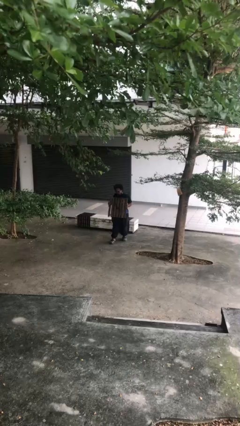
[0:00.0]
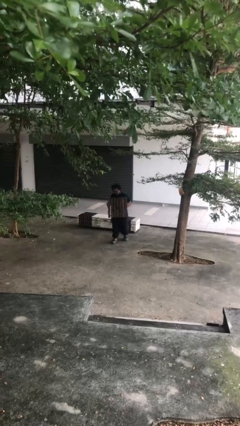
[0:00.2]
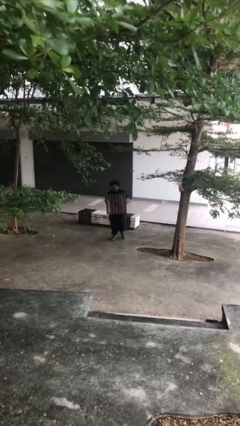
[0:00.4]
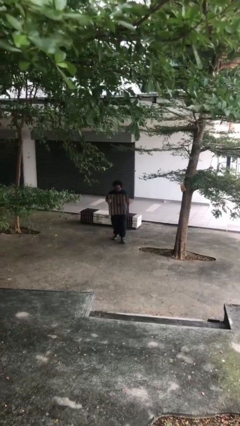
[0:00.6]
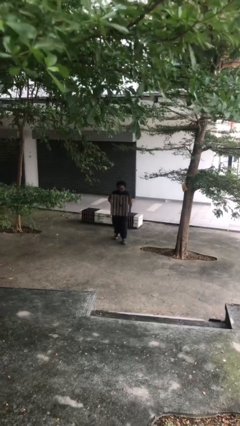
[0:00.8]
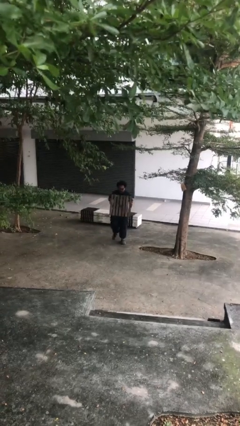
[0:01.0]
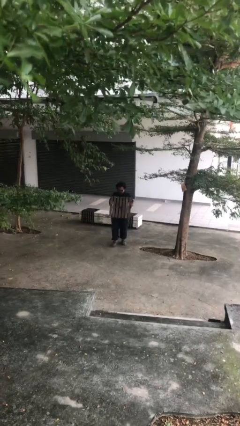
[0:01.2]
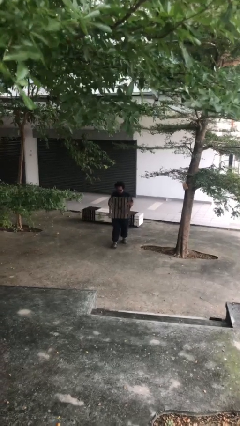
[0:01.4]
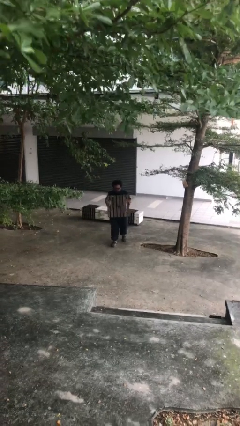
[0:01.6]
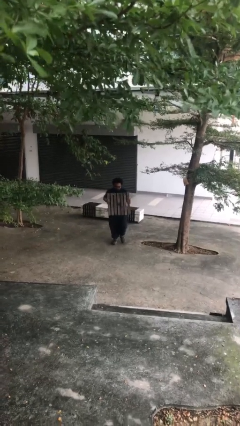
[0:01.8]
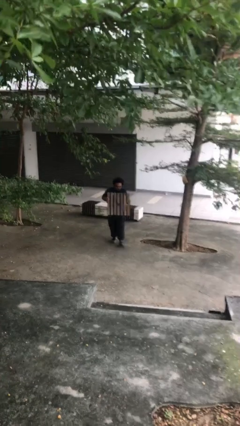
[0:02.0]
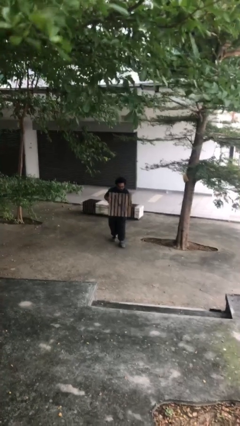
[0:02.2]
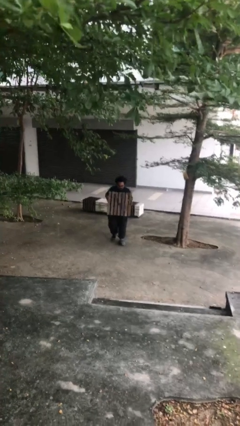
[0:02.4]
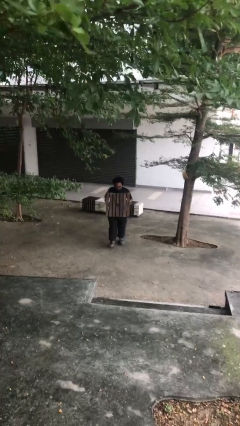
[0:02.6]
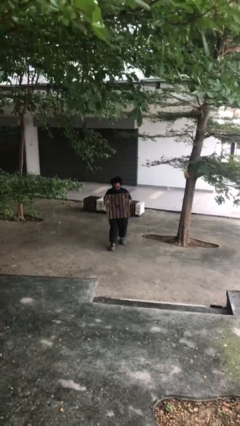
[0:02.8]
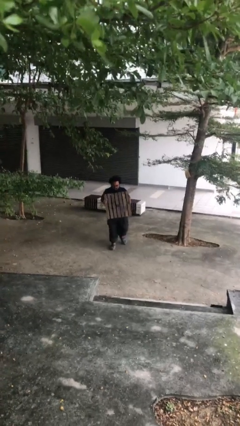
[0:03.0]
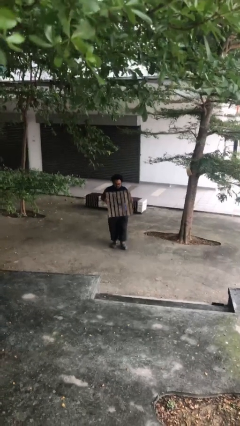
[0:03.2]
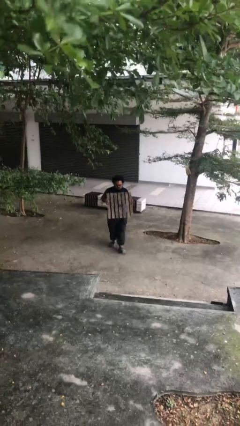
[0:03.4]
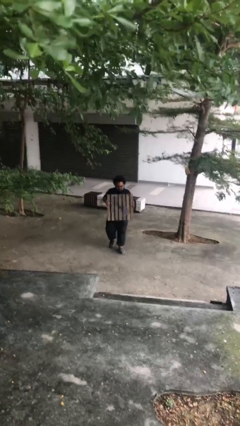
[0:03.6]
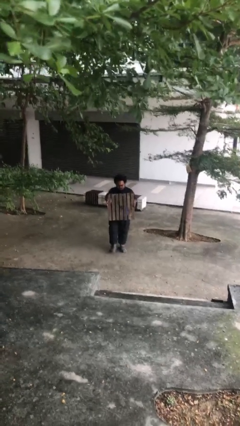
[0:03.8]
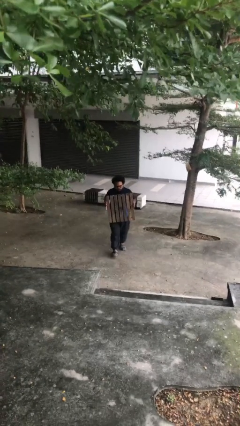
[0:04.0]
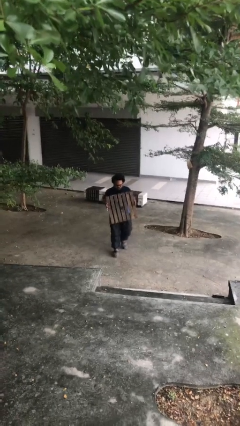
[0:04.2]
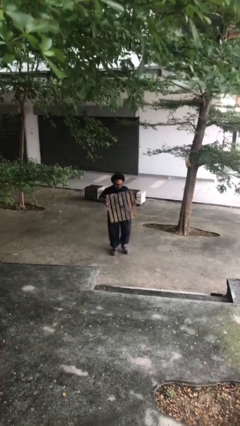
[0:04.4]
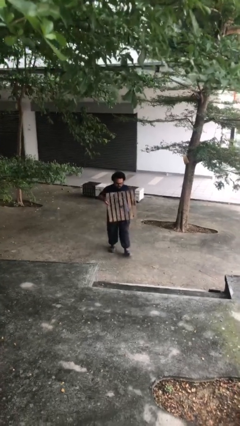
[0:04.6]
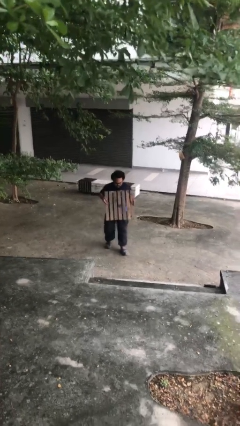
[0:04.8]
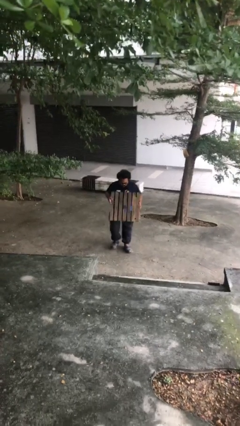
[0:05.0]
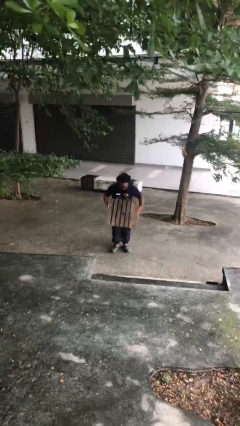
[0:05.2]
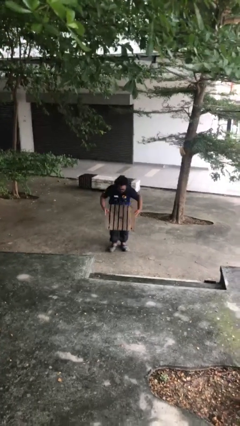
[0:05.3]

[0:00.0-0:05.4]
person carries heavy object

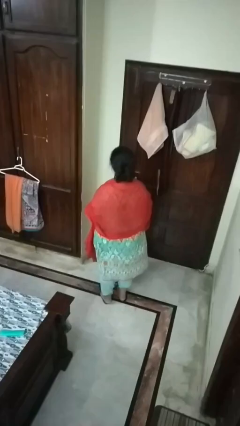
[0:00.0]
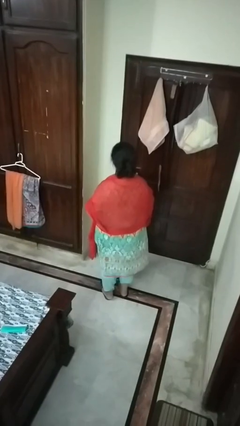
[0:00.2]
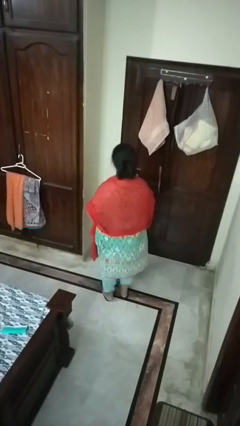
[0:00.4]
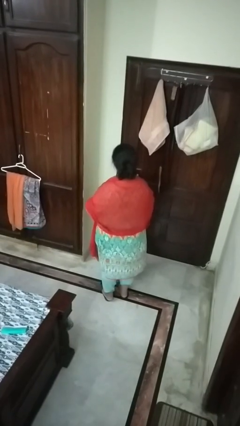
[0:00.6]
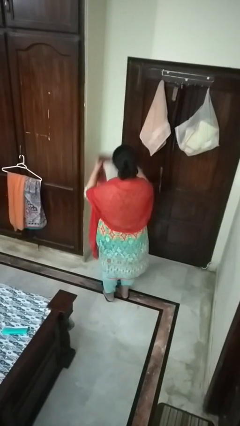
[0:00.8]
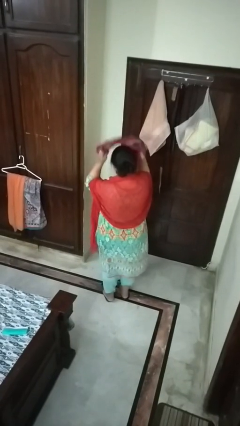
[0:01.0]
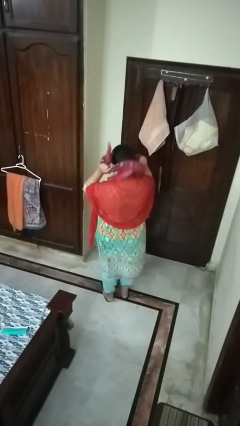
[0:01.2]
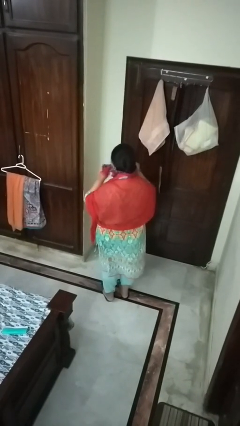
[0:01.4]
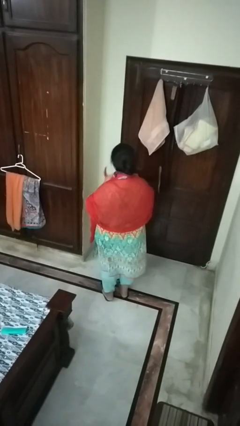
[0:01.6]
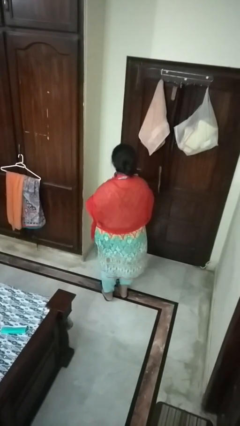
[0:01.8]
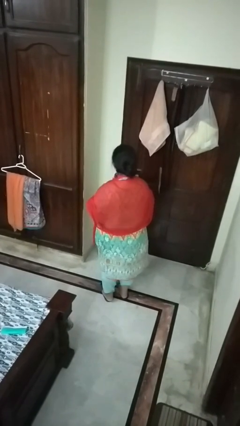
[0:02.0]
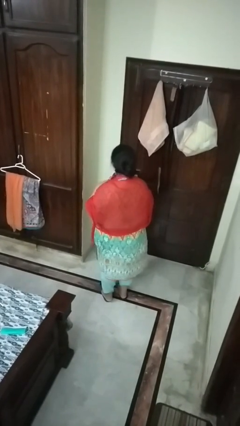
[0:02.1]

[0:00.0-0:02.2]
person puts on scarf

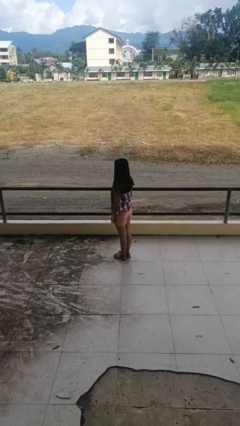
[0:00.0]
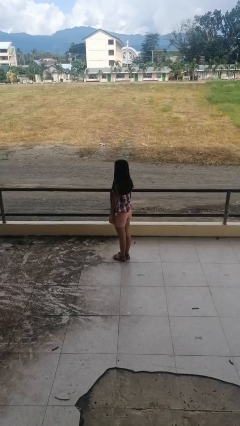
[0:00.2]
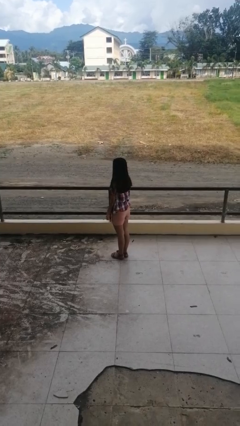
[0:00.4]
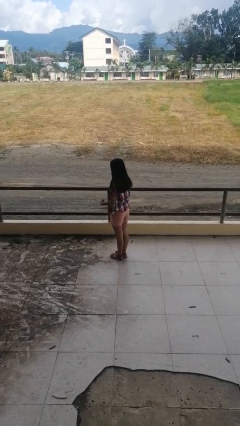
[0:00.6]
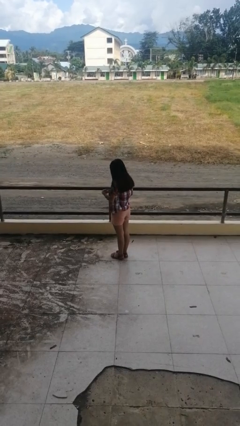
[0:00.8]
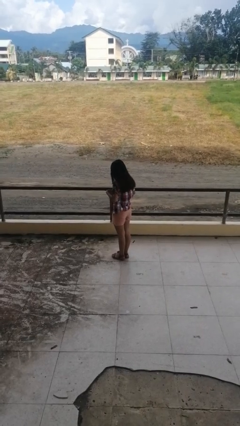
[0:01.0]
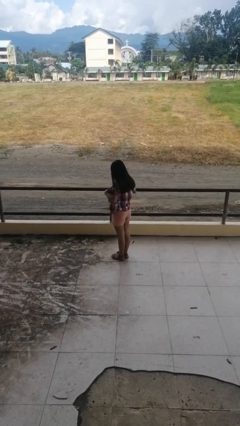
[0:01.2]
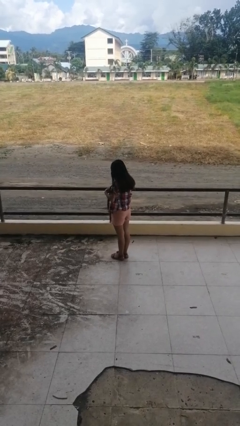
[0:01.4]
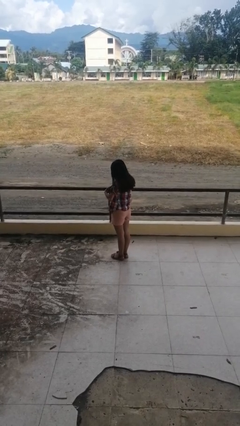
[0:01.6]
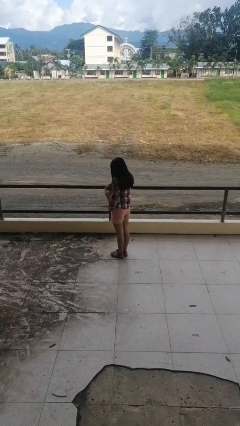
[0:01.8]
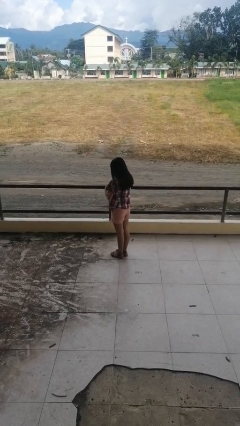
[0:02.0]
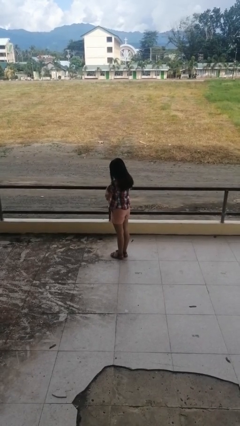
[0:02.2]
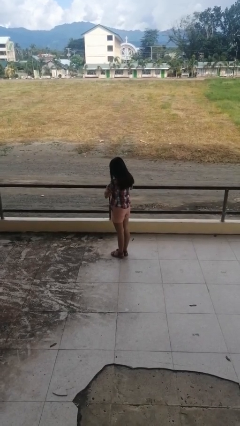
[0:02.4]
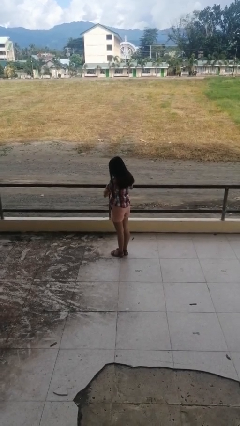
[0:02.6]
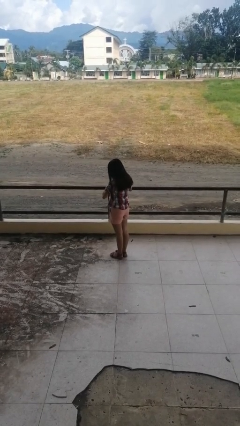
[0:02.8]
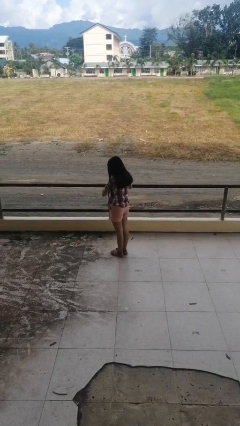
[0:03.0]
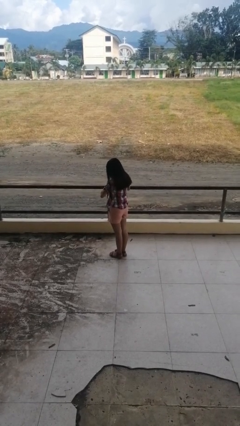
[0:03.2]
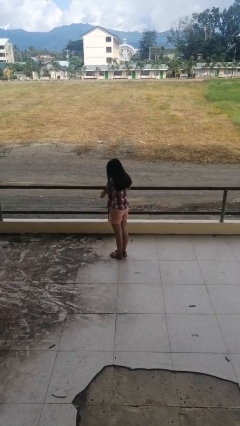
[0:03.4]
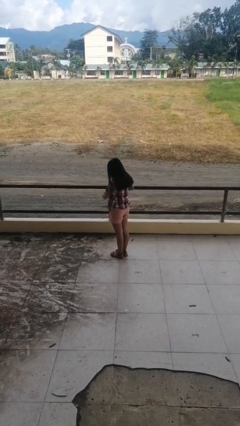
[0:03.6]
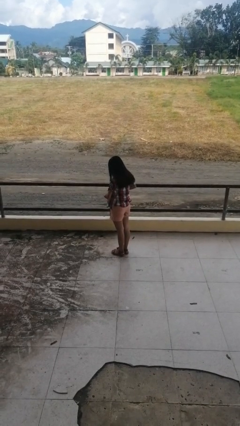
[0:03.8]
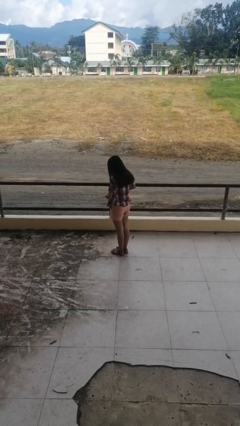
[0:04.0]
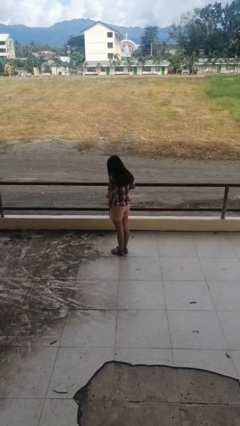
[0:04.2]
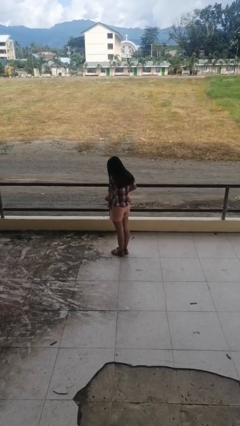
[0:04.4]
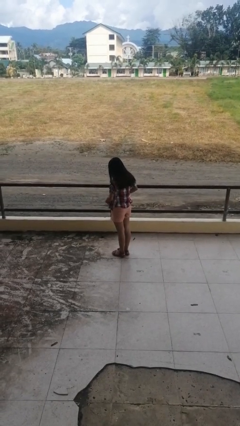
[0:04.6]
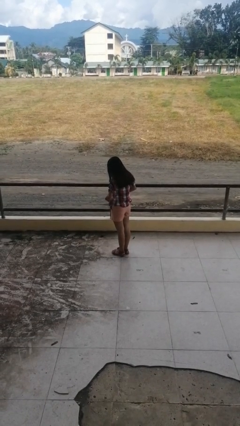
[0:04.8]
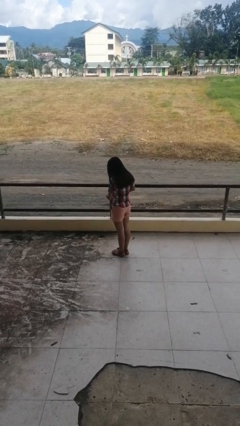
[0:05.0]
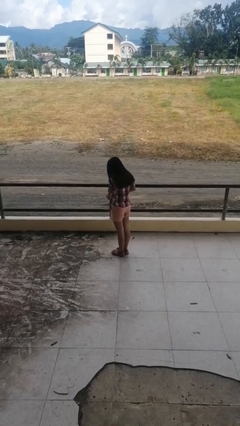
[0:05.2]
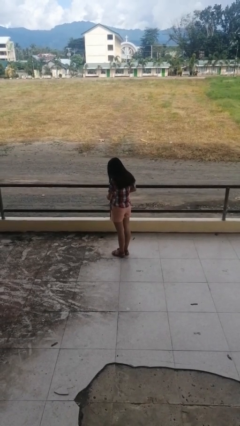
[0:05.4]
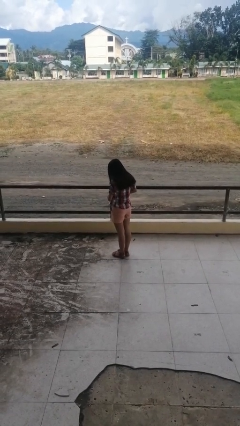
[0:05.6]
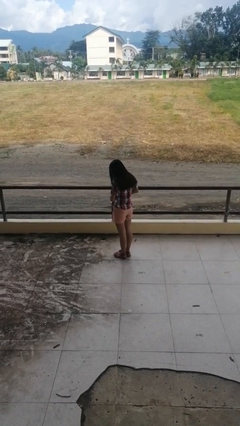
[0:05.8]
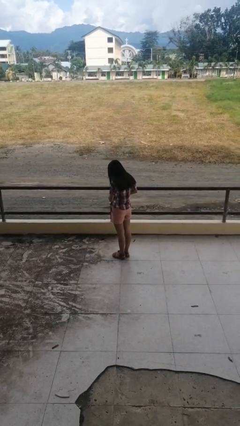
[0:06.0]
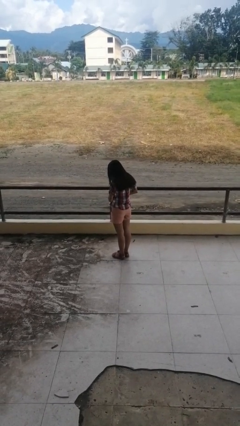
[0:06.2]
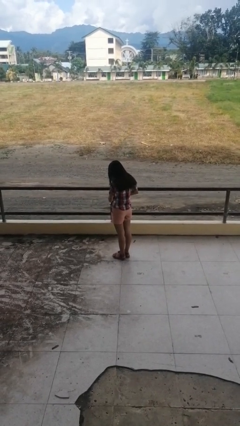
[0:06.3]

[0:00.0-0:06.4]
person buttons shirt

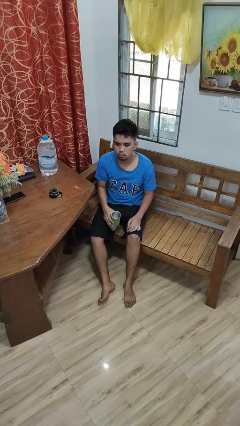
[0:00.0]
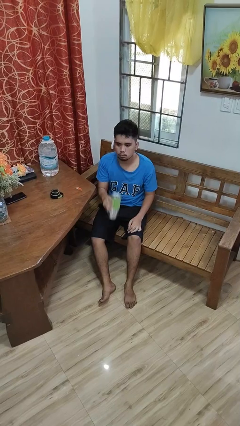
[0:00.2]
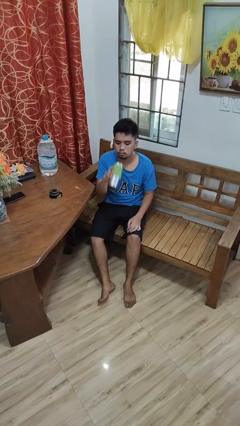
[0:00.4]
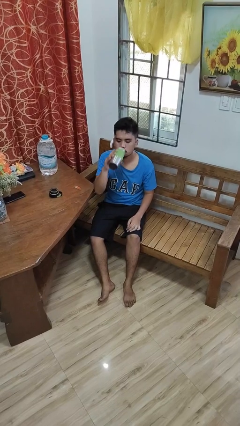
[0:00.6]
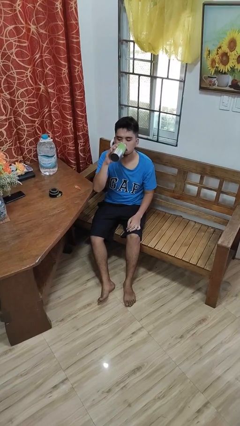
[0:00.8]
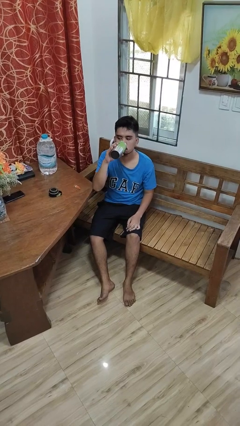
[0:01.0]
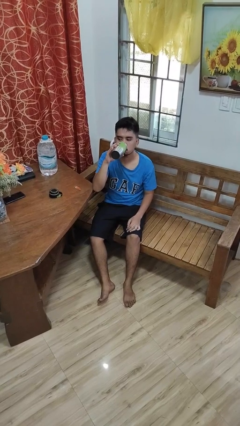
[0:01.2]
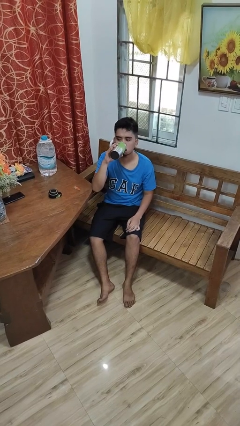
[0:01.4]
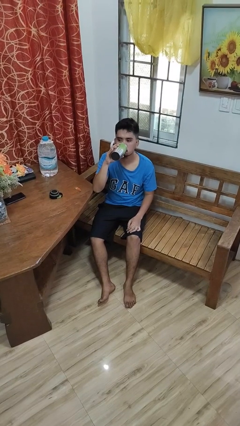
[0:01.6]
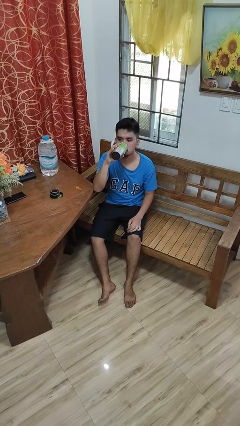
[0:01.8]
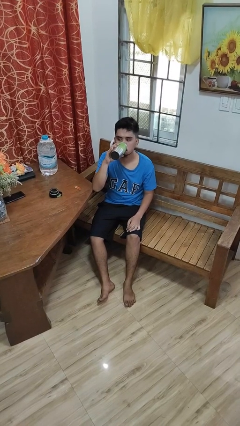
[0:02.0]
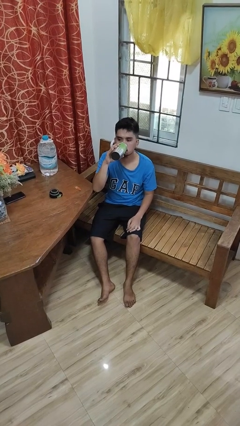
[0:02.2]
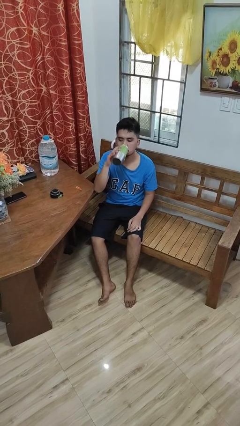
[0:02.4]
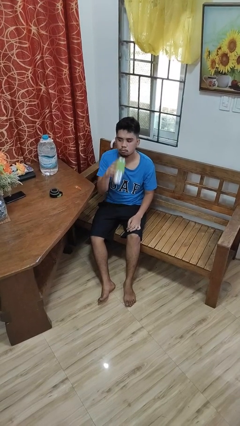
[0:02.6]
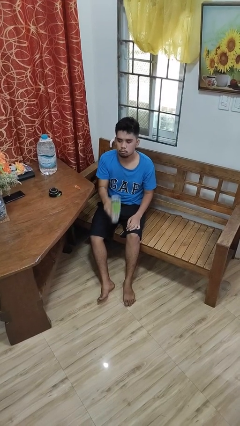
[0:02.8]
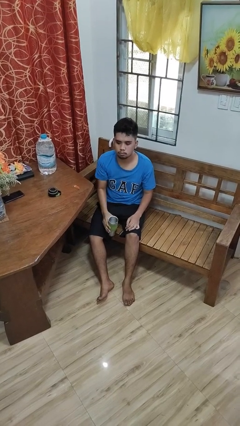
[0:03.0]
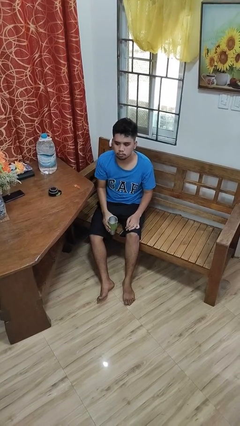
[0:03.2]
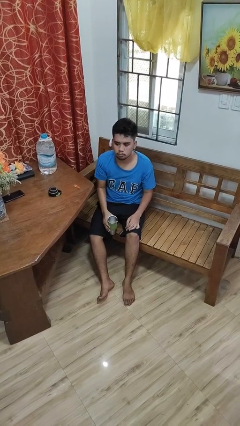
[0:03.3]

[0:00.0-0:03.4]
person drinks from bottle
